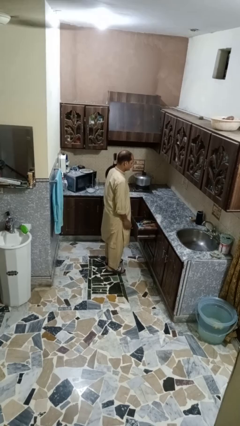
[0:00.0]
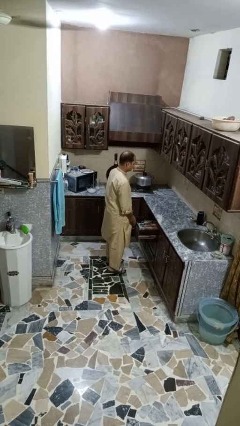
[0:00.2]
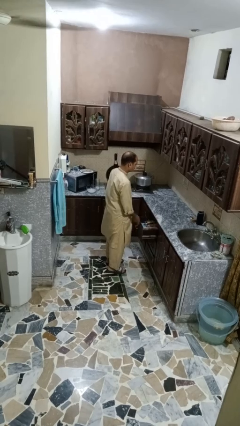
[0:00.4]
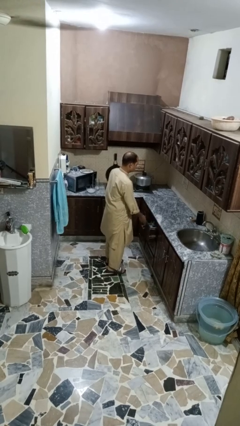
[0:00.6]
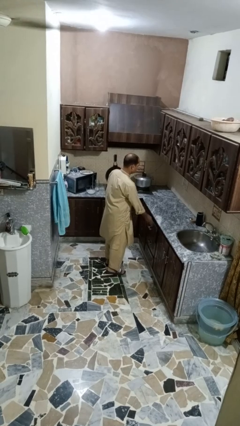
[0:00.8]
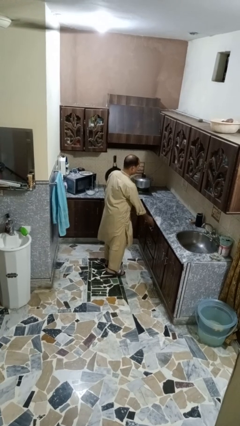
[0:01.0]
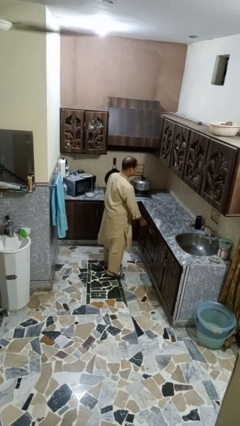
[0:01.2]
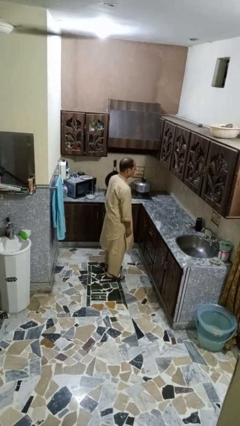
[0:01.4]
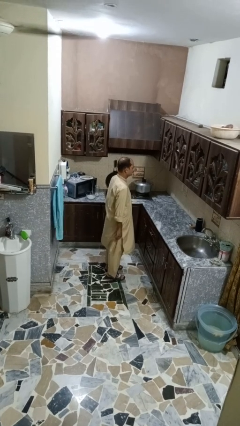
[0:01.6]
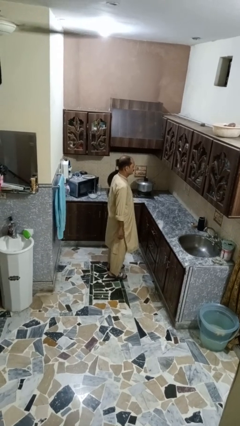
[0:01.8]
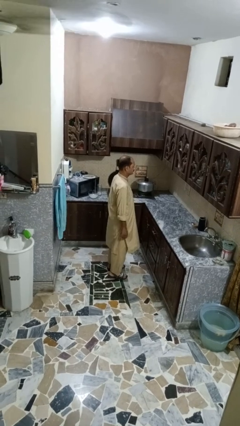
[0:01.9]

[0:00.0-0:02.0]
person closes kitchen drawer

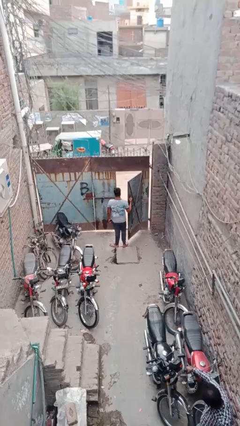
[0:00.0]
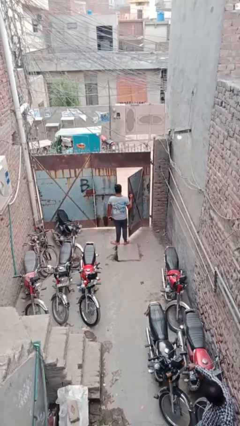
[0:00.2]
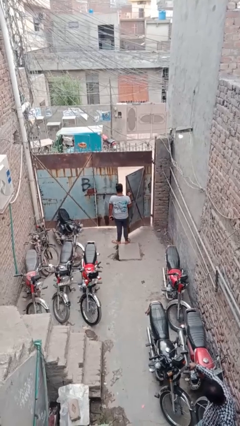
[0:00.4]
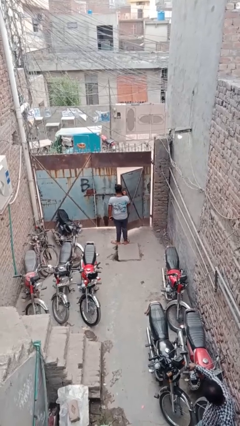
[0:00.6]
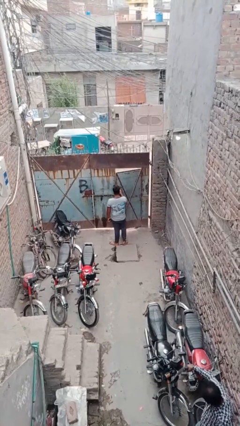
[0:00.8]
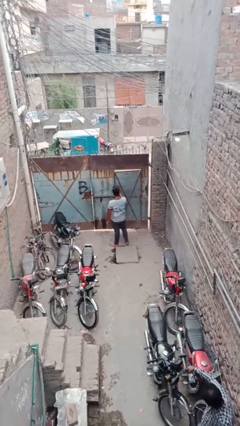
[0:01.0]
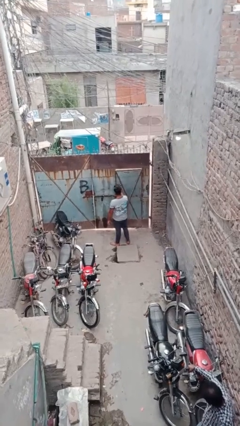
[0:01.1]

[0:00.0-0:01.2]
person closes facility door

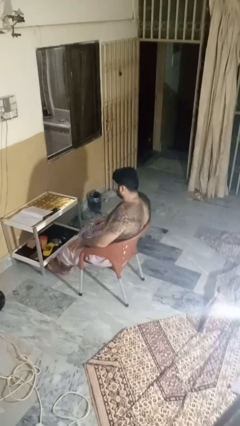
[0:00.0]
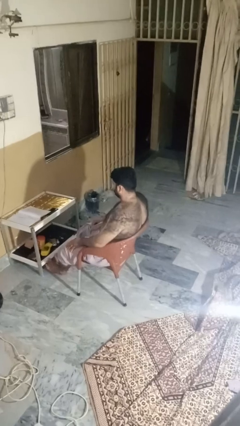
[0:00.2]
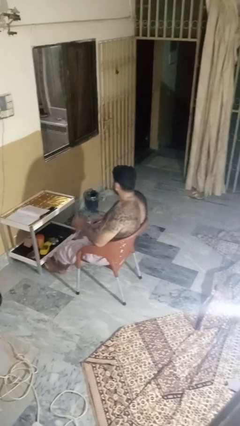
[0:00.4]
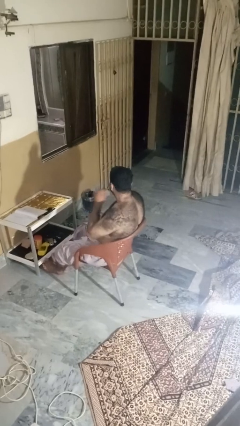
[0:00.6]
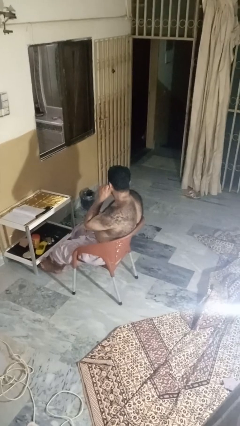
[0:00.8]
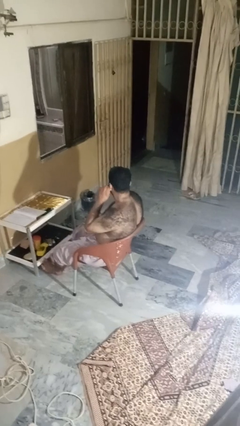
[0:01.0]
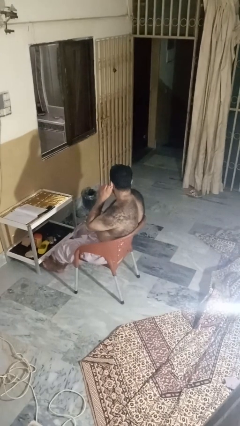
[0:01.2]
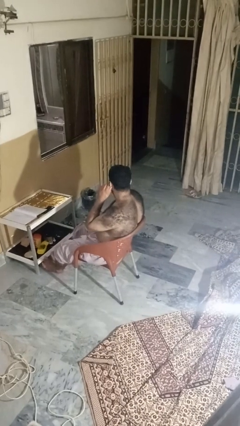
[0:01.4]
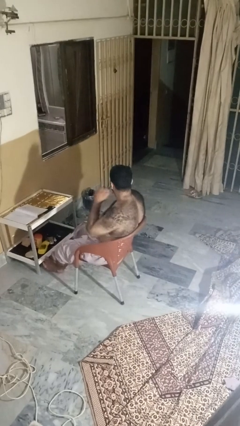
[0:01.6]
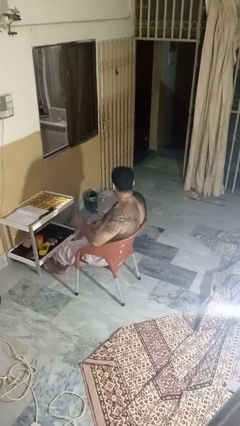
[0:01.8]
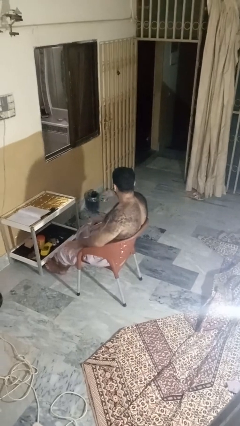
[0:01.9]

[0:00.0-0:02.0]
person touches earlobe

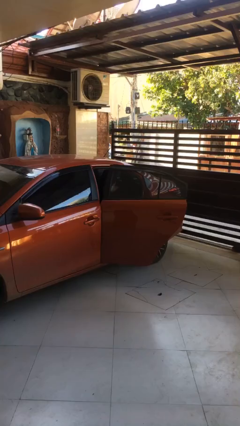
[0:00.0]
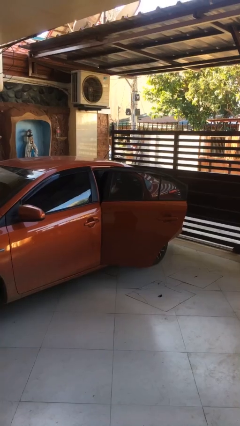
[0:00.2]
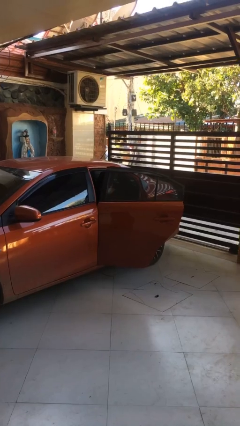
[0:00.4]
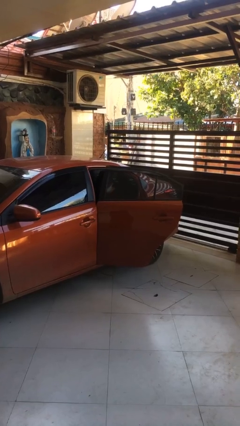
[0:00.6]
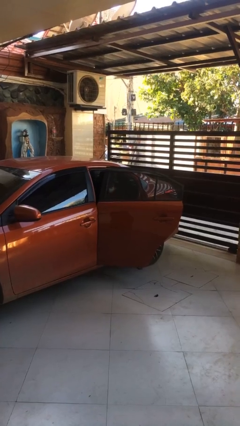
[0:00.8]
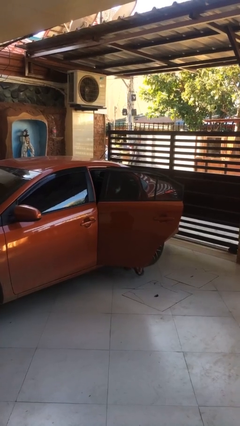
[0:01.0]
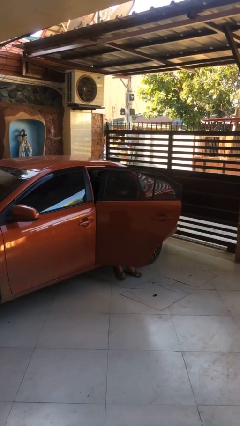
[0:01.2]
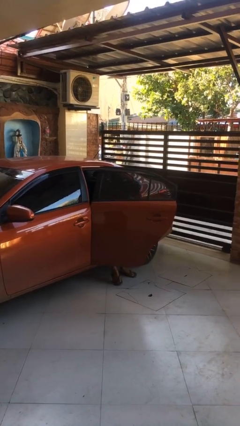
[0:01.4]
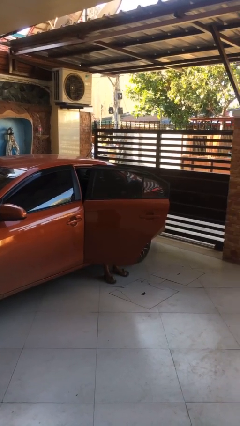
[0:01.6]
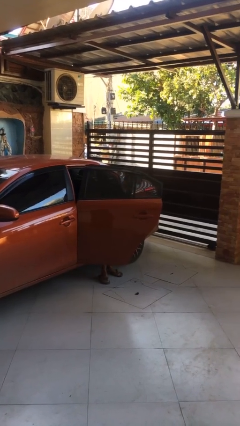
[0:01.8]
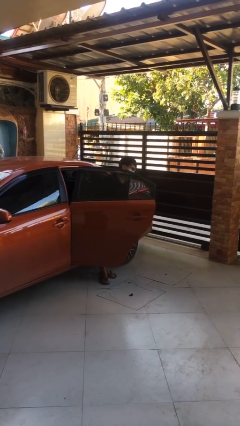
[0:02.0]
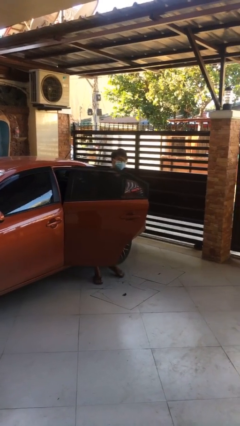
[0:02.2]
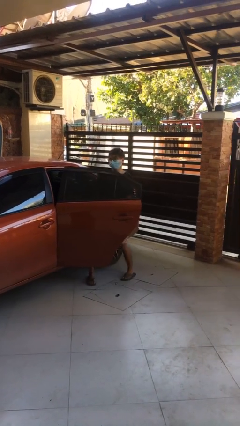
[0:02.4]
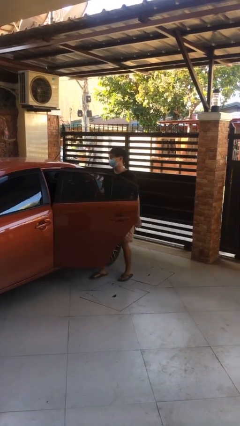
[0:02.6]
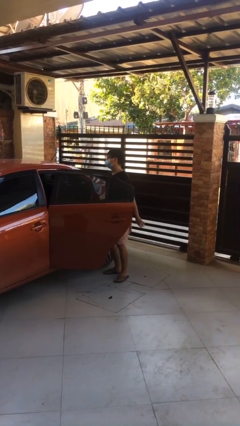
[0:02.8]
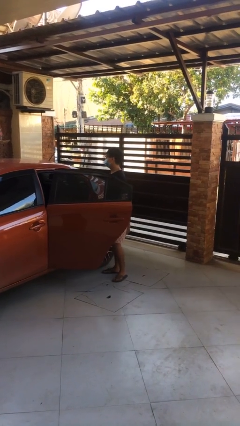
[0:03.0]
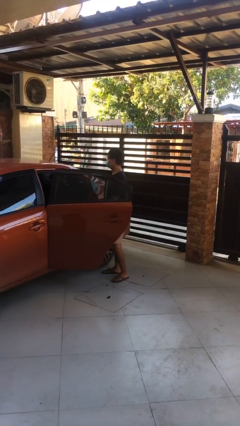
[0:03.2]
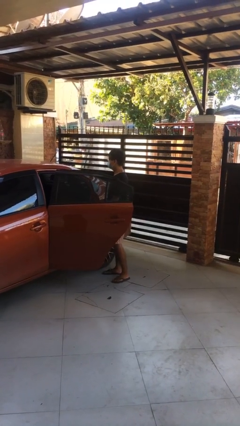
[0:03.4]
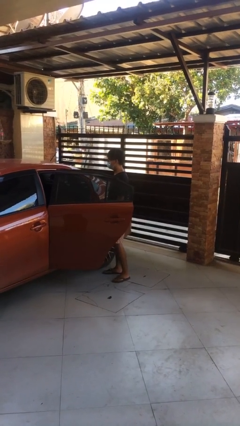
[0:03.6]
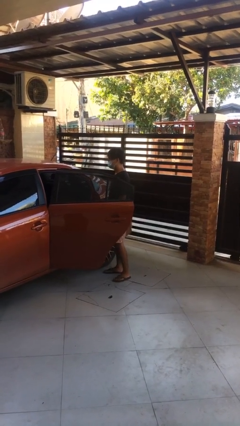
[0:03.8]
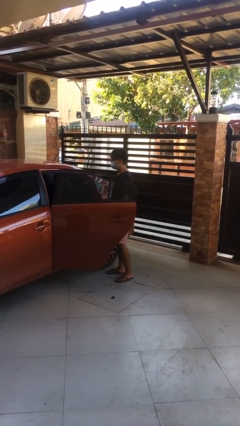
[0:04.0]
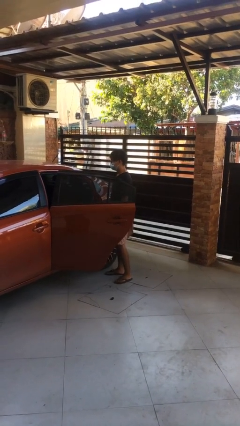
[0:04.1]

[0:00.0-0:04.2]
person exits car

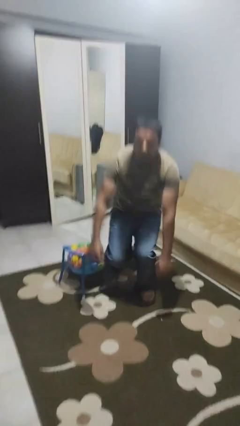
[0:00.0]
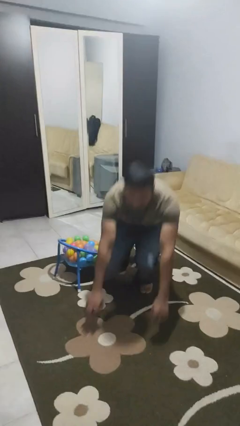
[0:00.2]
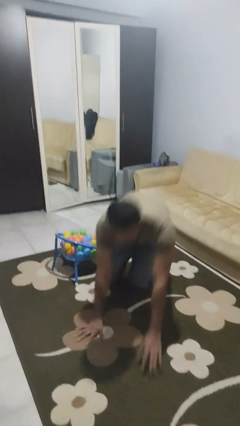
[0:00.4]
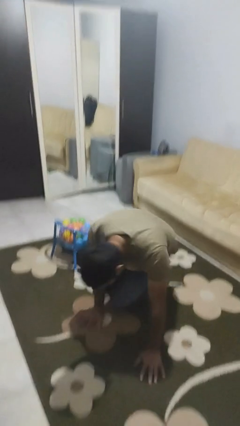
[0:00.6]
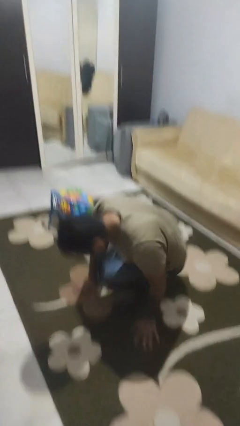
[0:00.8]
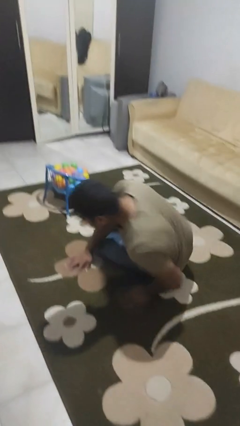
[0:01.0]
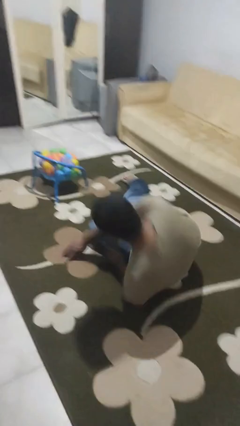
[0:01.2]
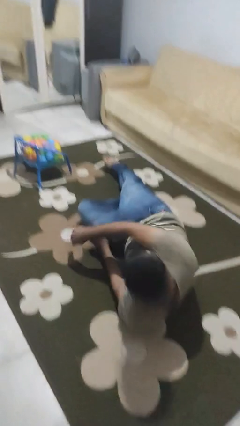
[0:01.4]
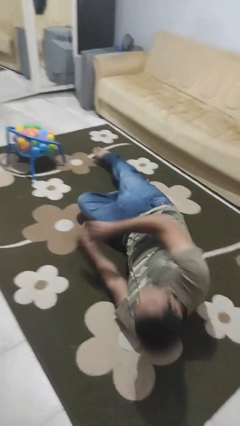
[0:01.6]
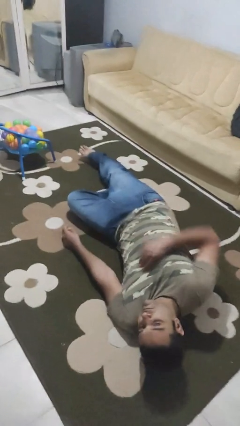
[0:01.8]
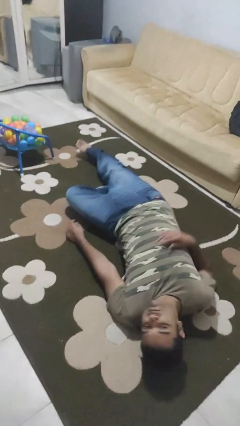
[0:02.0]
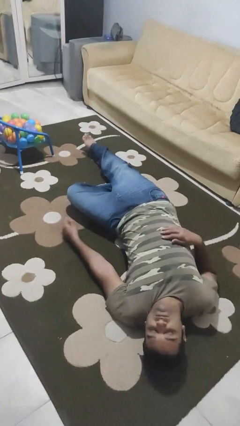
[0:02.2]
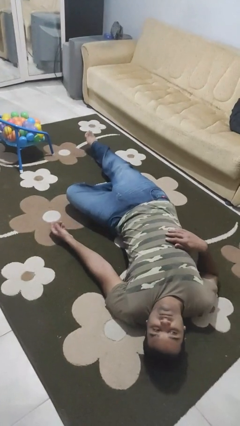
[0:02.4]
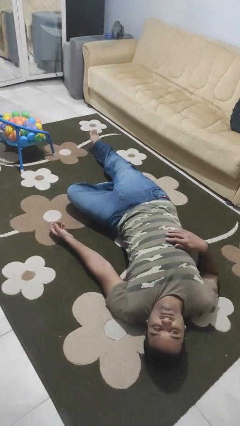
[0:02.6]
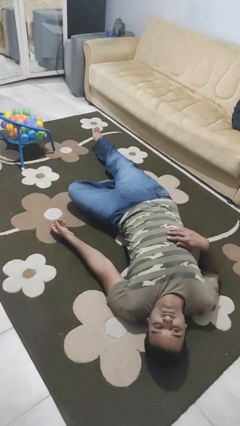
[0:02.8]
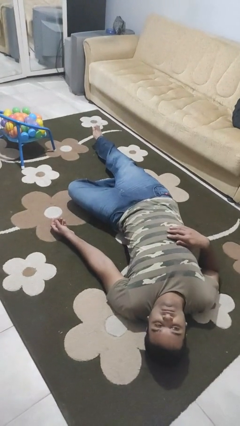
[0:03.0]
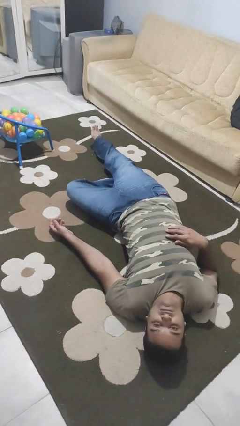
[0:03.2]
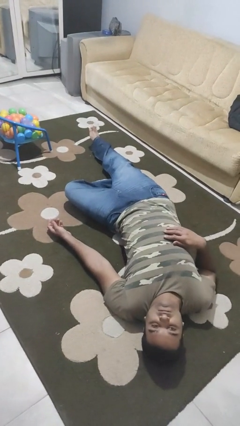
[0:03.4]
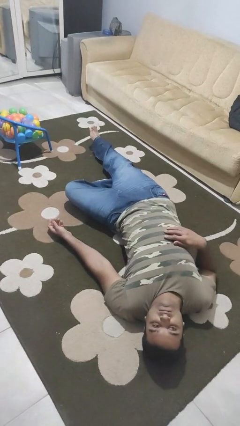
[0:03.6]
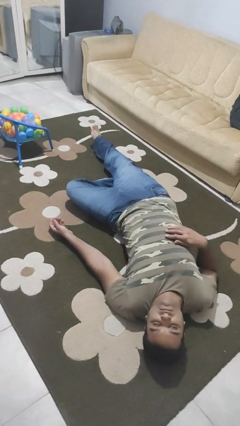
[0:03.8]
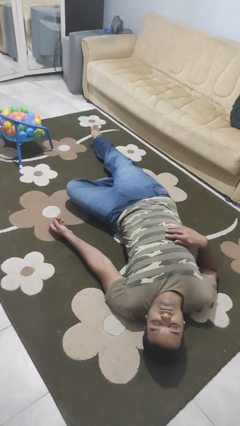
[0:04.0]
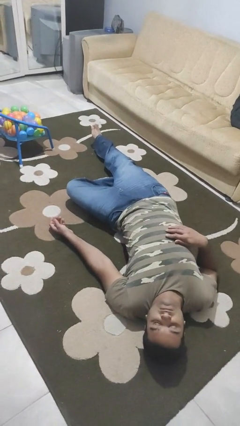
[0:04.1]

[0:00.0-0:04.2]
person lies down on floor

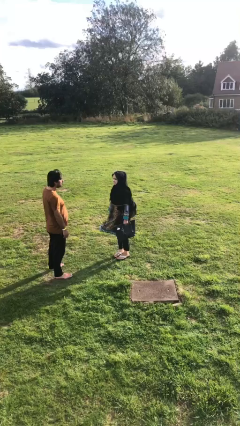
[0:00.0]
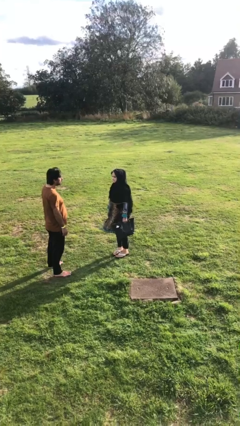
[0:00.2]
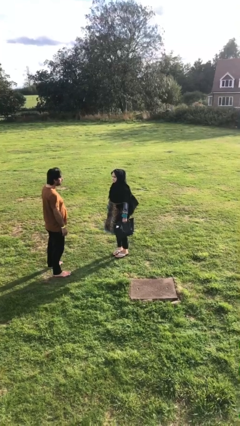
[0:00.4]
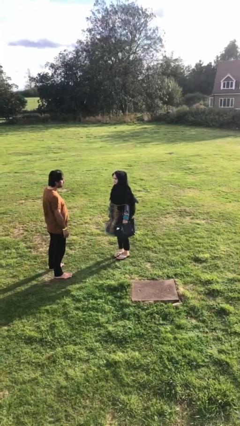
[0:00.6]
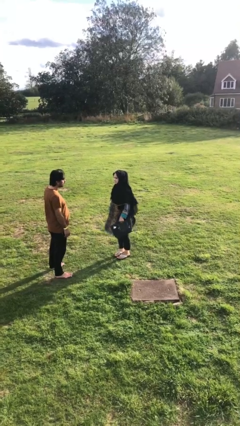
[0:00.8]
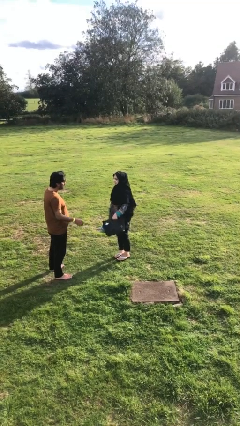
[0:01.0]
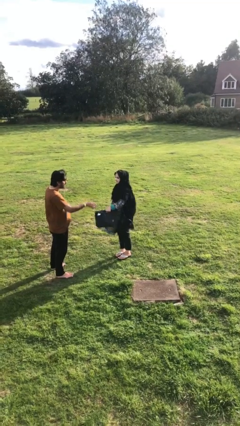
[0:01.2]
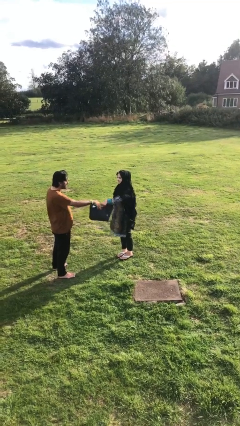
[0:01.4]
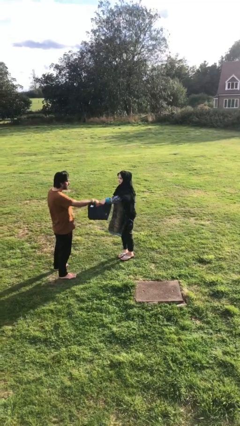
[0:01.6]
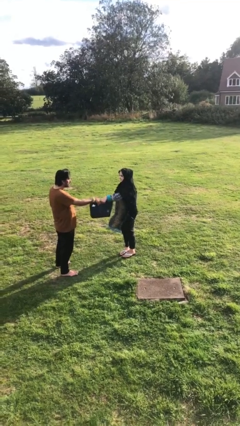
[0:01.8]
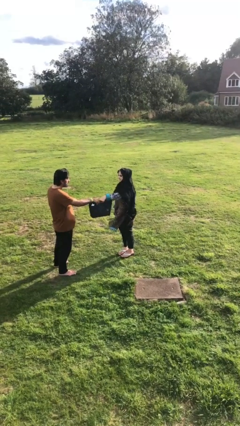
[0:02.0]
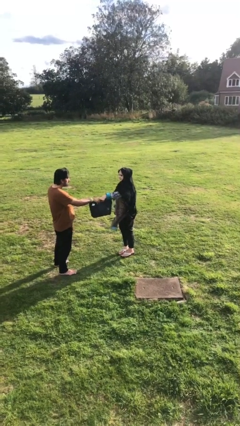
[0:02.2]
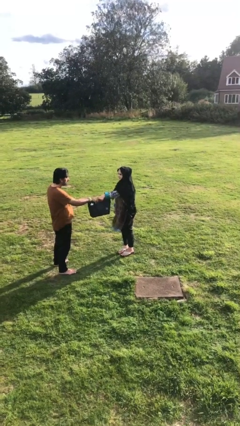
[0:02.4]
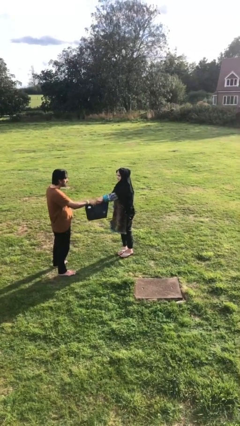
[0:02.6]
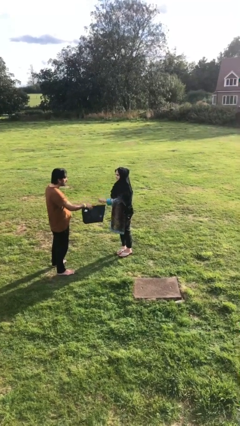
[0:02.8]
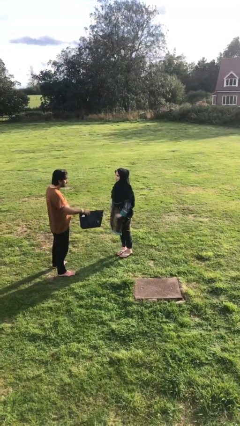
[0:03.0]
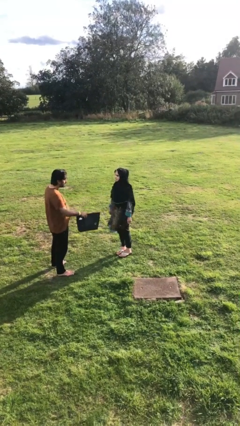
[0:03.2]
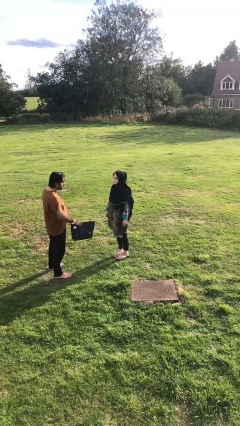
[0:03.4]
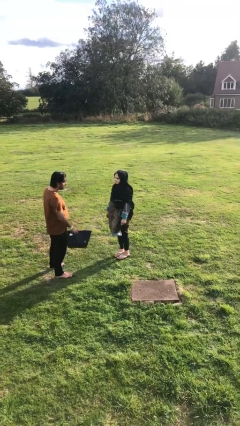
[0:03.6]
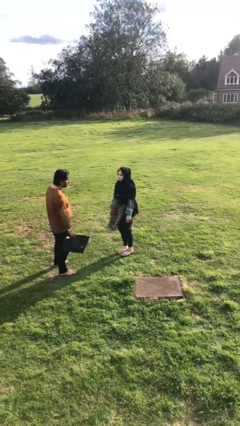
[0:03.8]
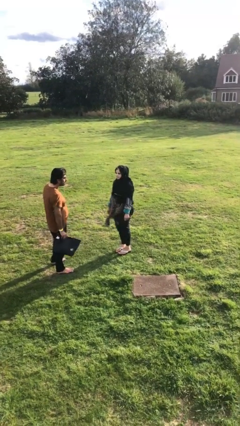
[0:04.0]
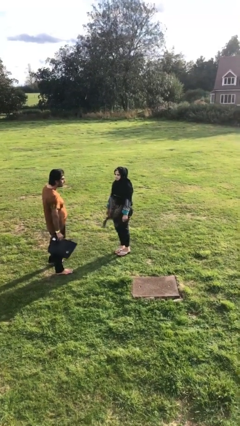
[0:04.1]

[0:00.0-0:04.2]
person transfers object to person
